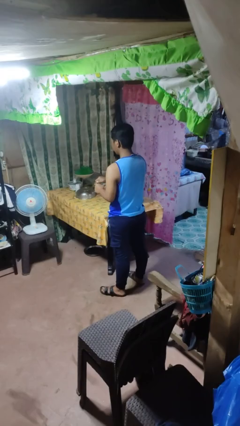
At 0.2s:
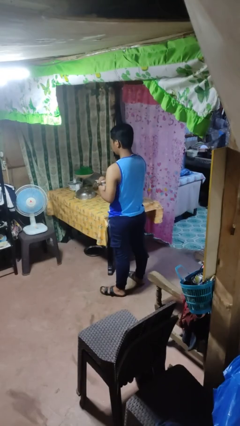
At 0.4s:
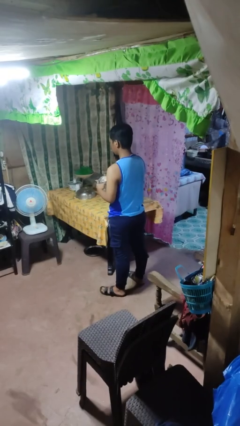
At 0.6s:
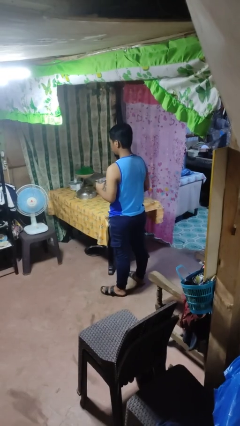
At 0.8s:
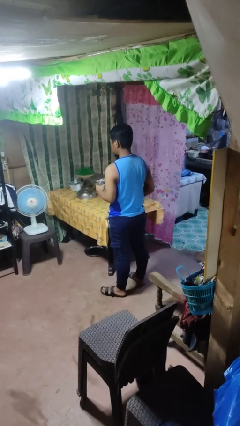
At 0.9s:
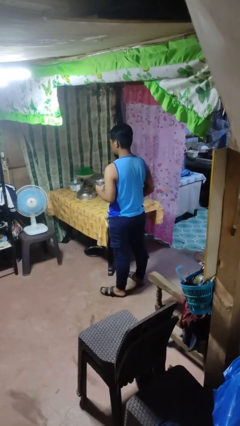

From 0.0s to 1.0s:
person opens jar

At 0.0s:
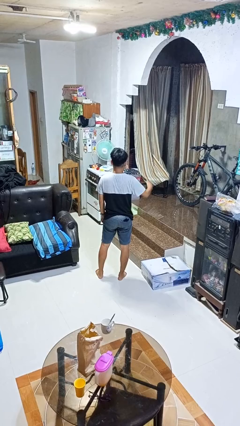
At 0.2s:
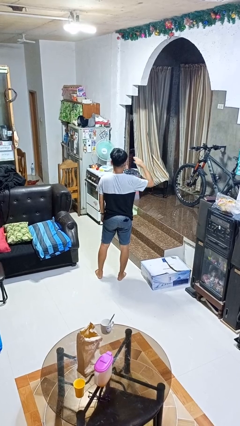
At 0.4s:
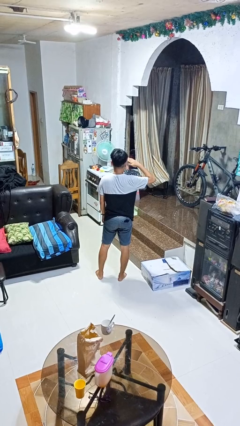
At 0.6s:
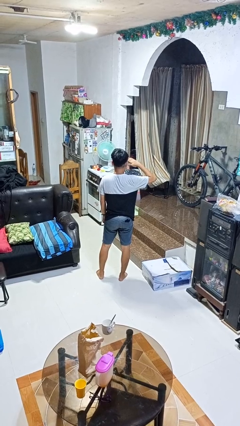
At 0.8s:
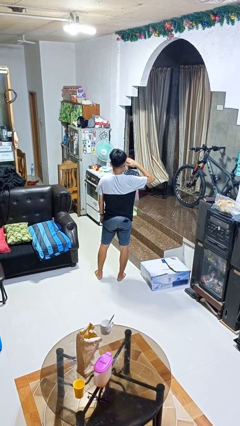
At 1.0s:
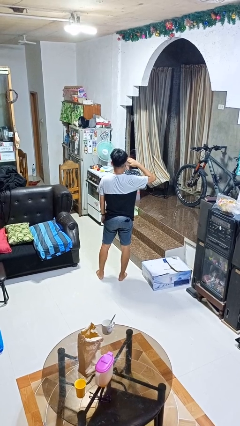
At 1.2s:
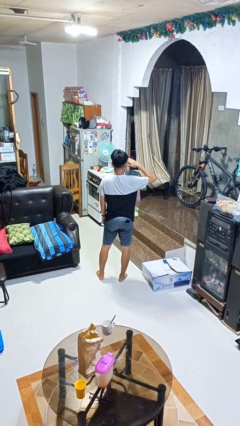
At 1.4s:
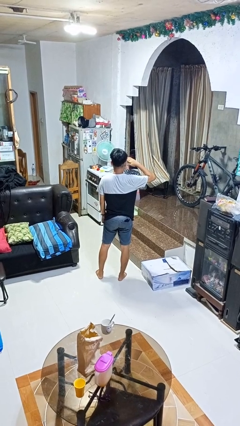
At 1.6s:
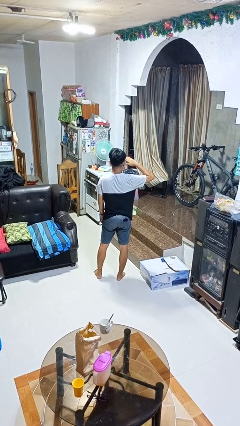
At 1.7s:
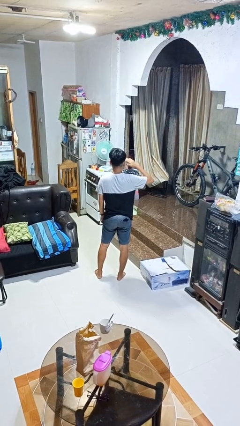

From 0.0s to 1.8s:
person salutes

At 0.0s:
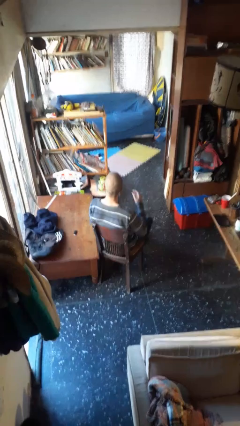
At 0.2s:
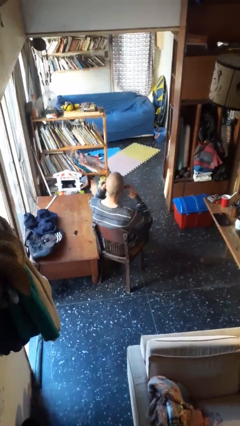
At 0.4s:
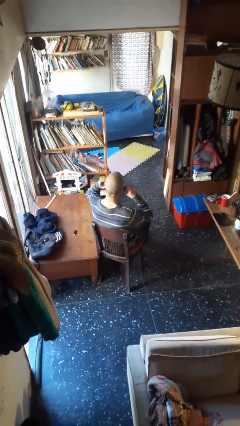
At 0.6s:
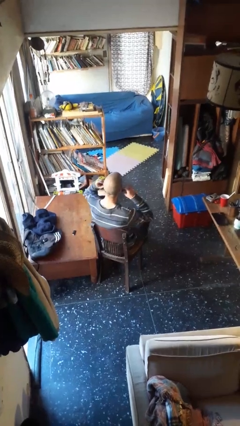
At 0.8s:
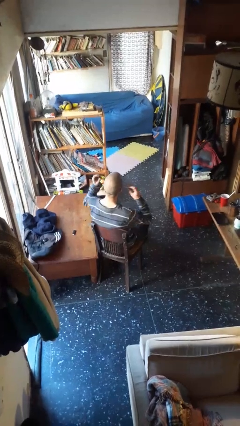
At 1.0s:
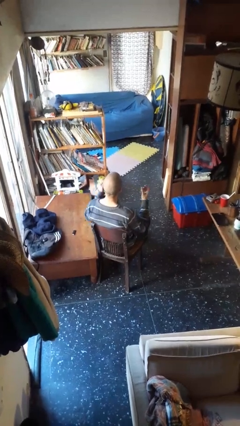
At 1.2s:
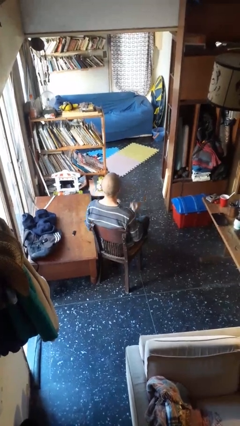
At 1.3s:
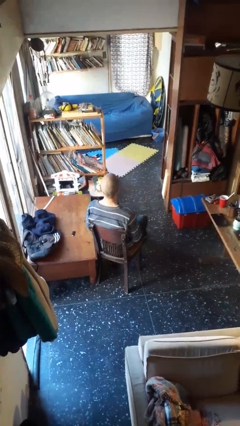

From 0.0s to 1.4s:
person takes off headphones

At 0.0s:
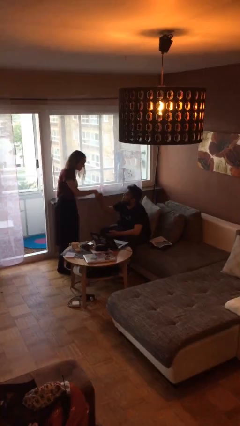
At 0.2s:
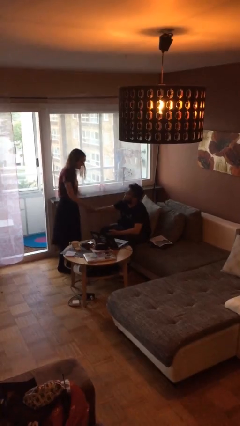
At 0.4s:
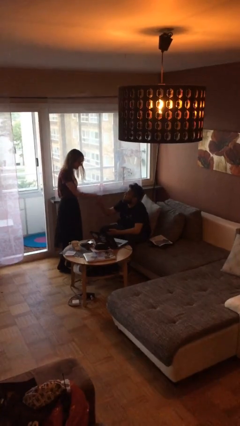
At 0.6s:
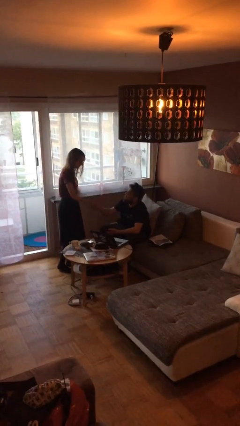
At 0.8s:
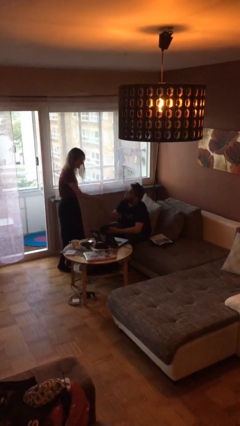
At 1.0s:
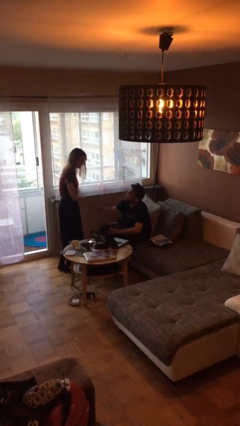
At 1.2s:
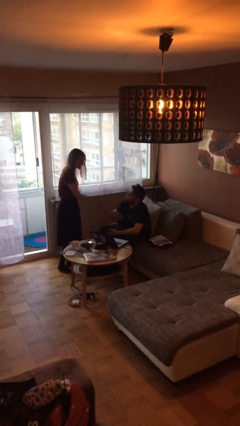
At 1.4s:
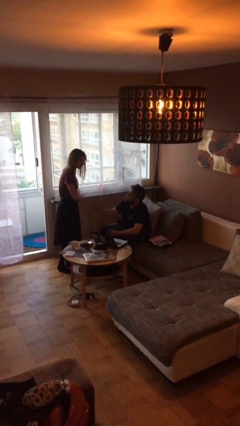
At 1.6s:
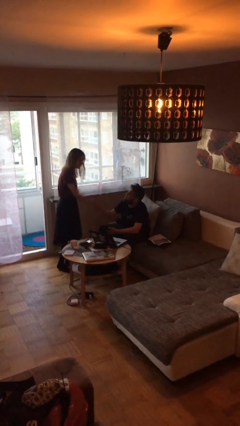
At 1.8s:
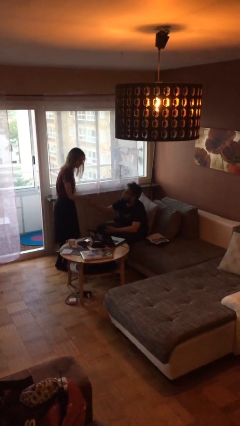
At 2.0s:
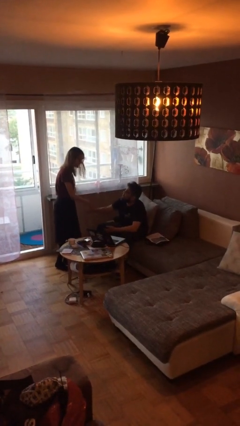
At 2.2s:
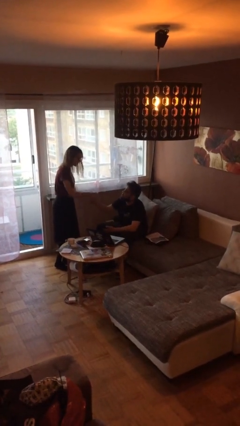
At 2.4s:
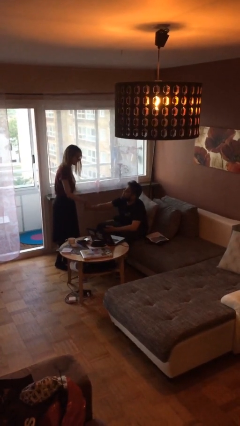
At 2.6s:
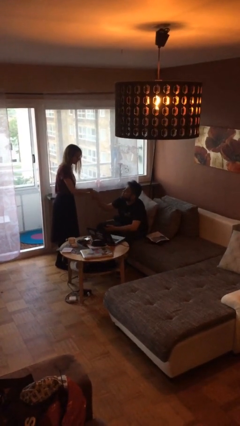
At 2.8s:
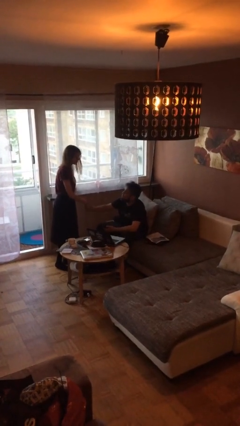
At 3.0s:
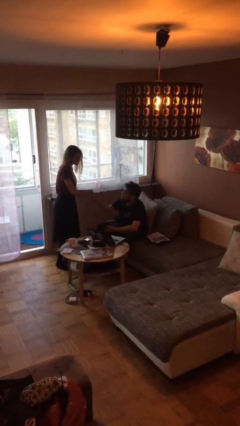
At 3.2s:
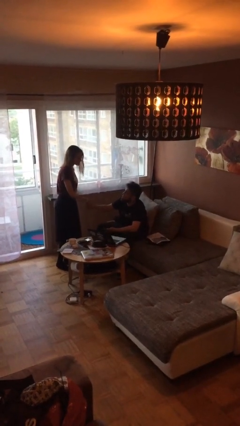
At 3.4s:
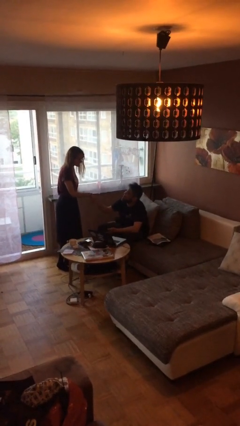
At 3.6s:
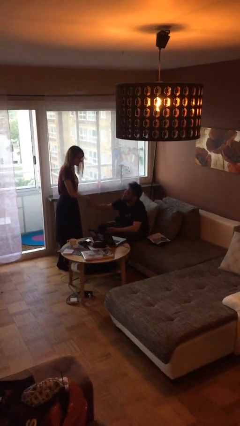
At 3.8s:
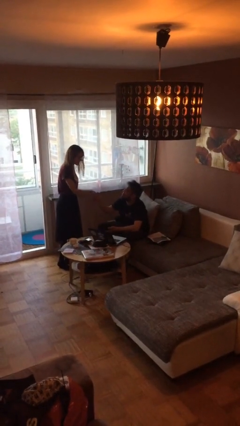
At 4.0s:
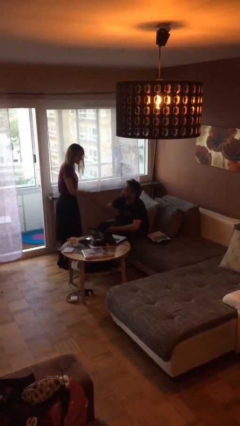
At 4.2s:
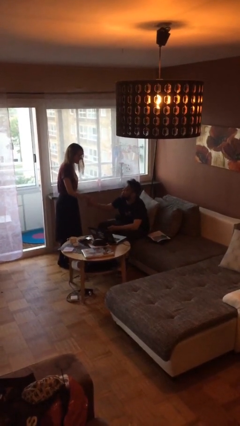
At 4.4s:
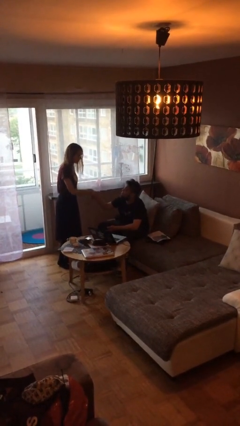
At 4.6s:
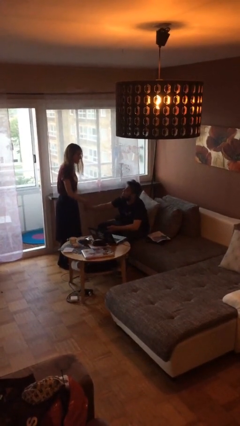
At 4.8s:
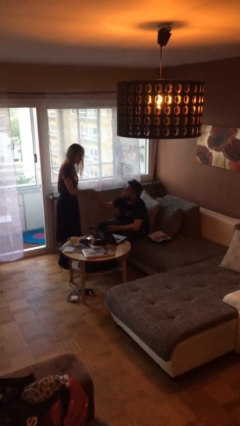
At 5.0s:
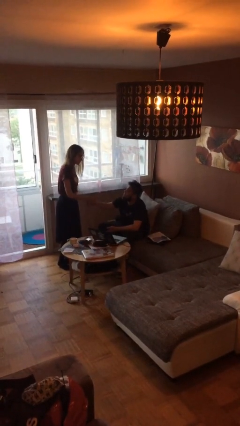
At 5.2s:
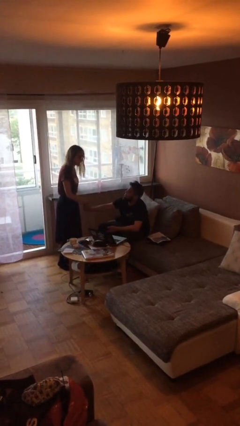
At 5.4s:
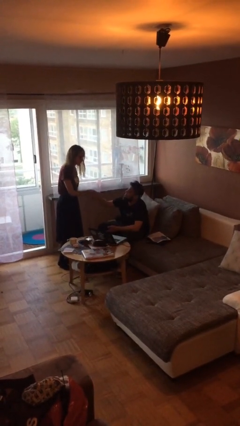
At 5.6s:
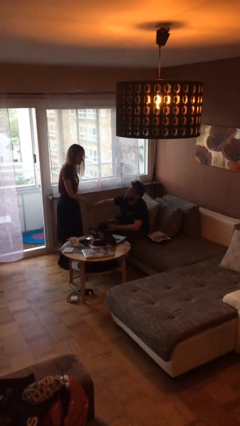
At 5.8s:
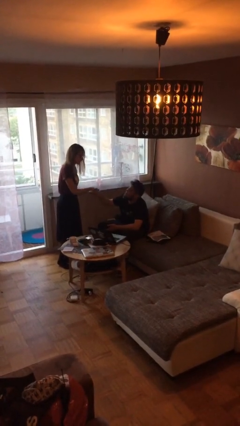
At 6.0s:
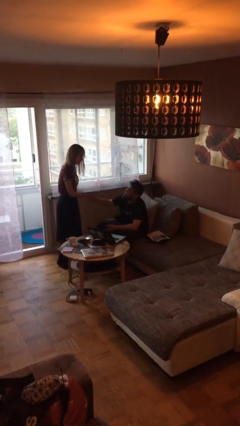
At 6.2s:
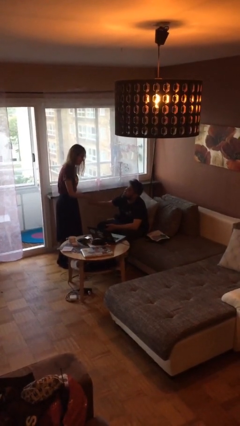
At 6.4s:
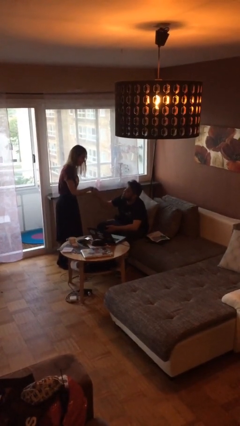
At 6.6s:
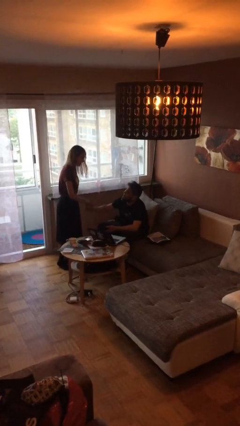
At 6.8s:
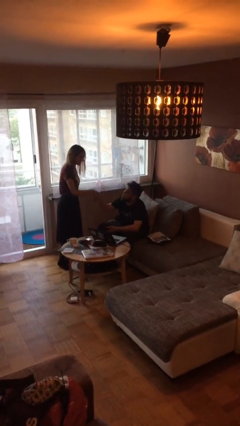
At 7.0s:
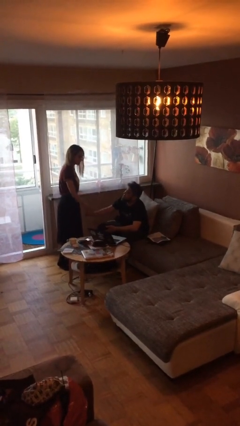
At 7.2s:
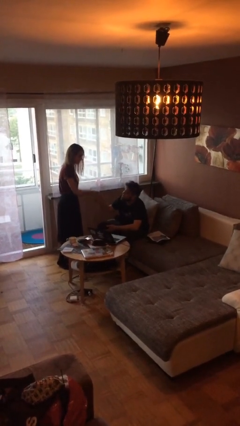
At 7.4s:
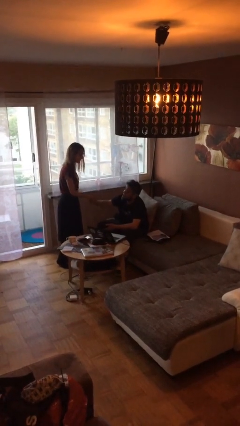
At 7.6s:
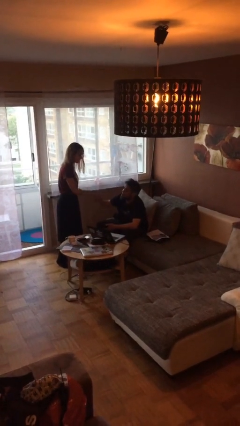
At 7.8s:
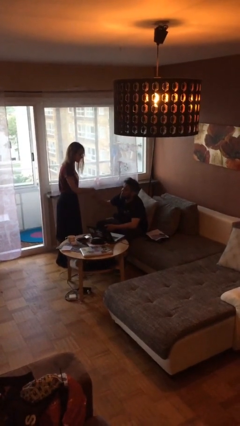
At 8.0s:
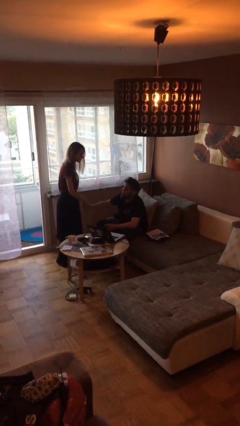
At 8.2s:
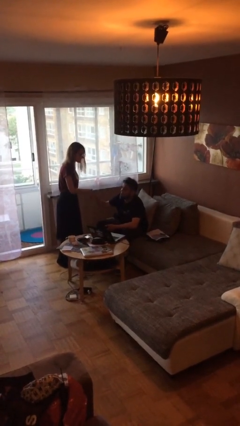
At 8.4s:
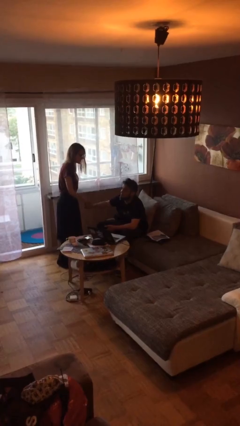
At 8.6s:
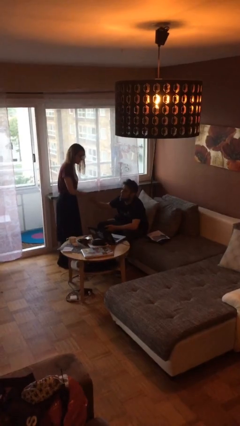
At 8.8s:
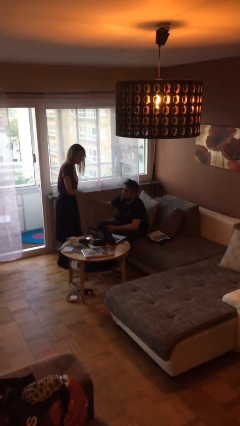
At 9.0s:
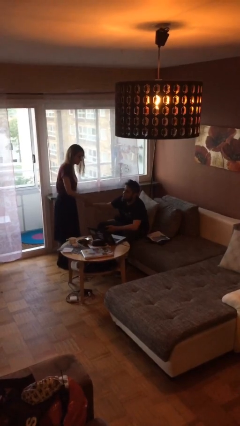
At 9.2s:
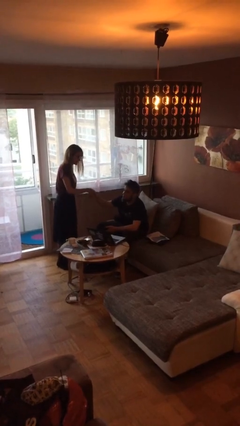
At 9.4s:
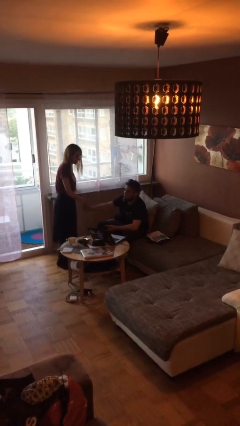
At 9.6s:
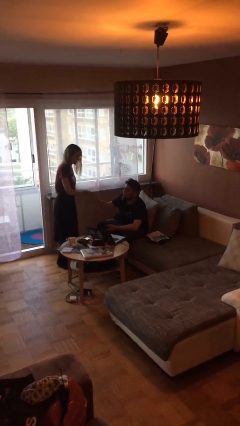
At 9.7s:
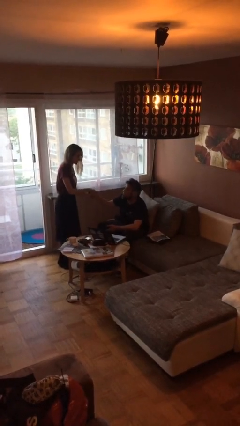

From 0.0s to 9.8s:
person shakes hand

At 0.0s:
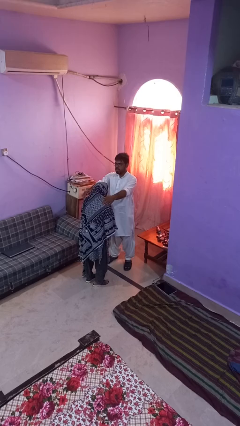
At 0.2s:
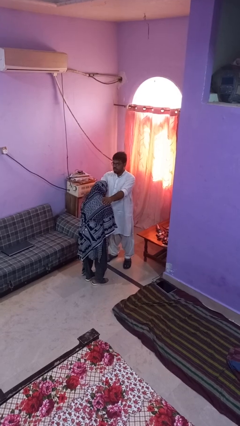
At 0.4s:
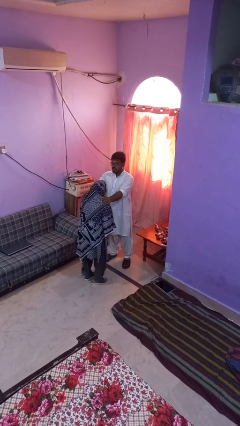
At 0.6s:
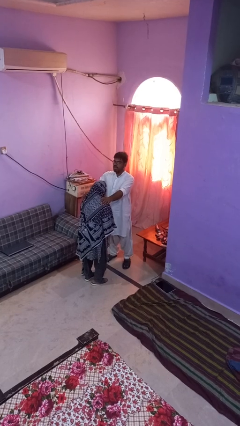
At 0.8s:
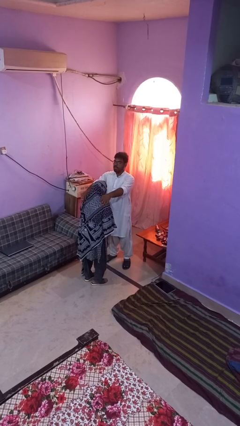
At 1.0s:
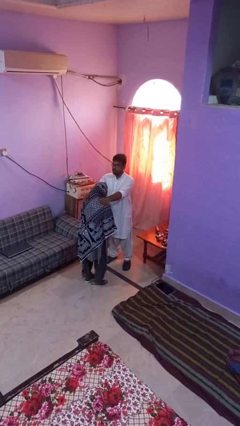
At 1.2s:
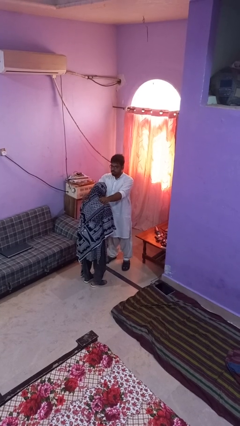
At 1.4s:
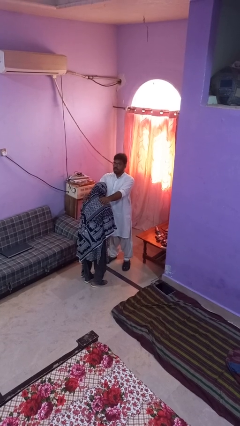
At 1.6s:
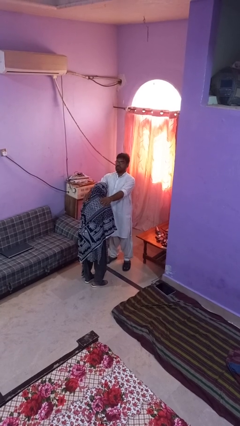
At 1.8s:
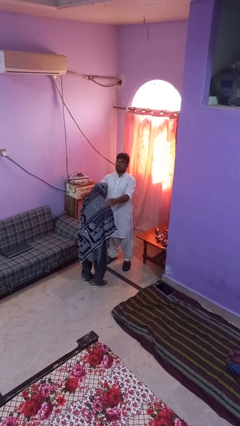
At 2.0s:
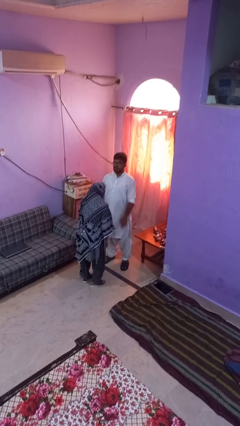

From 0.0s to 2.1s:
person pounds shoulders of person

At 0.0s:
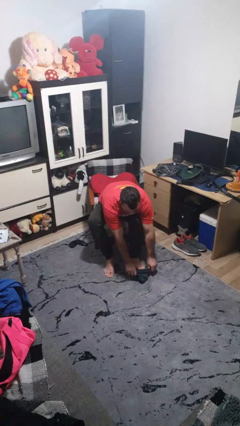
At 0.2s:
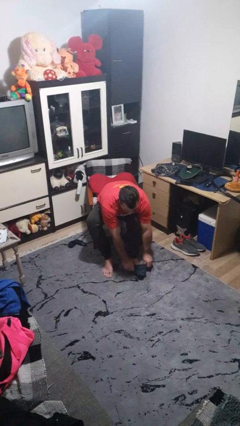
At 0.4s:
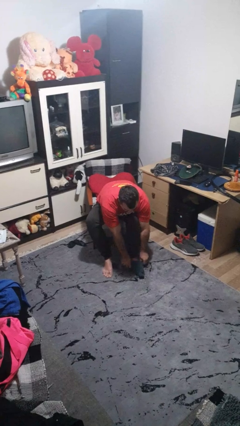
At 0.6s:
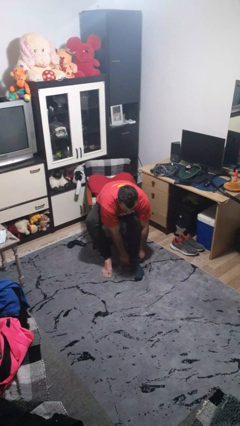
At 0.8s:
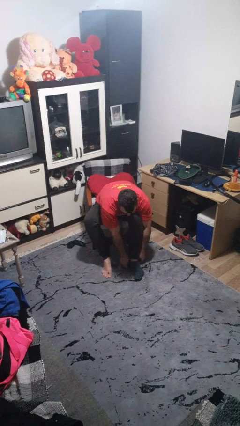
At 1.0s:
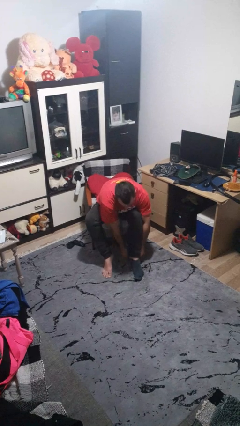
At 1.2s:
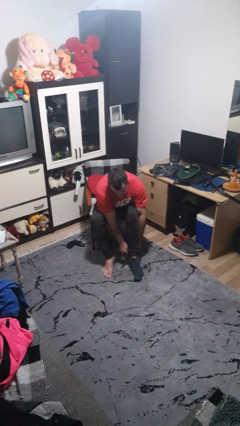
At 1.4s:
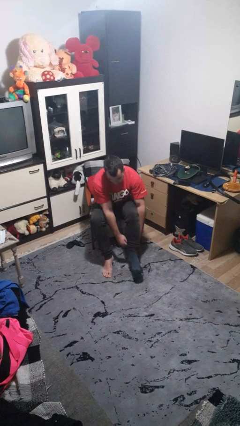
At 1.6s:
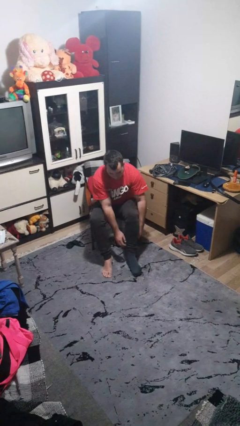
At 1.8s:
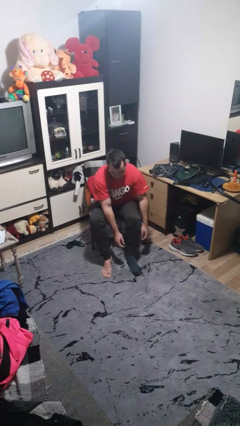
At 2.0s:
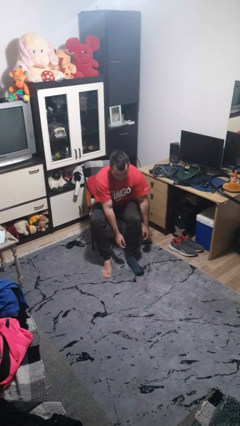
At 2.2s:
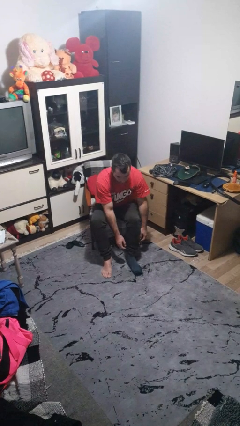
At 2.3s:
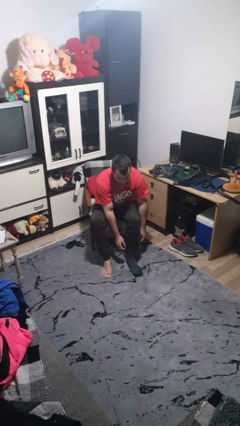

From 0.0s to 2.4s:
person puts on socks
